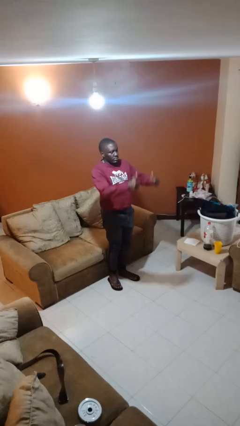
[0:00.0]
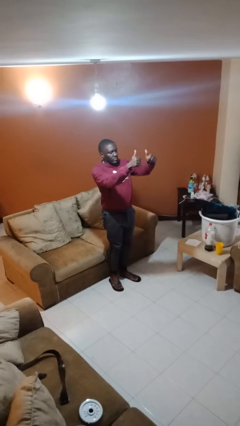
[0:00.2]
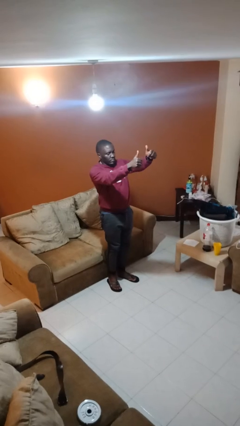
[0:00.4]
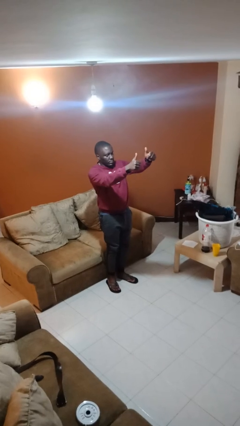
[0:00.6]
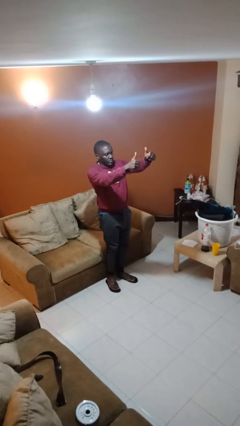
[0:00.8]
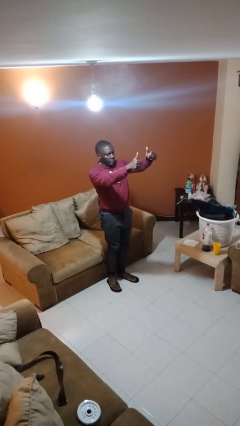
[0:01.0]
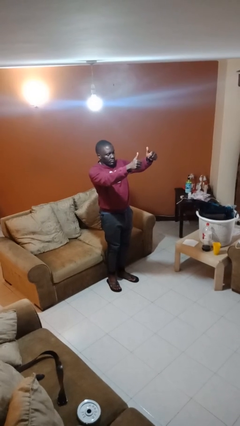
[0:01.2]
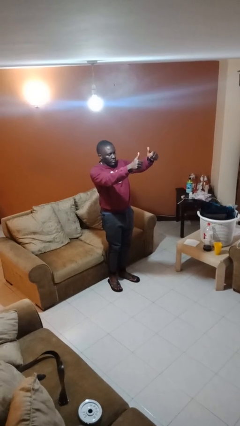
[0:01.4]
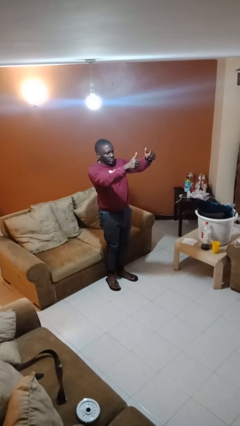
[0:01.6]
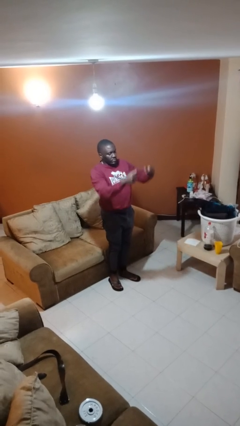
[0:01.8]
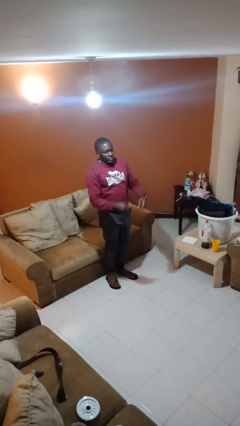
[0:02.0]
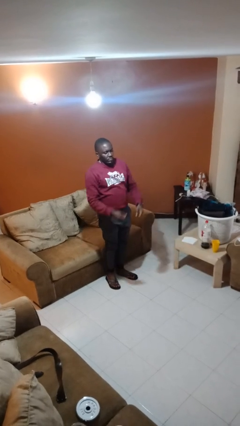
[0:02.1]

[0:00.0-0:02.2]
person gestures thumbs up

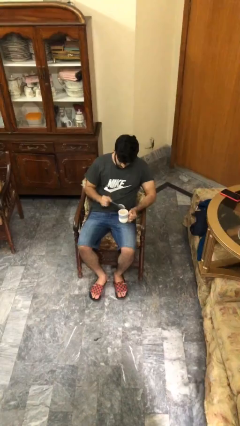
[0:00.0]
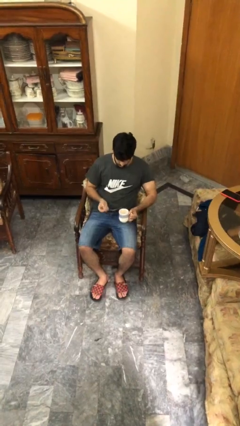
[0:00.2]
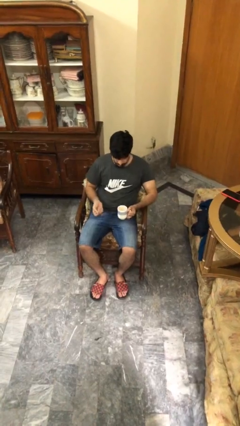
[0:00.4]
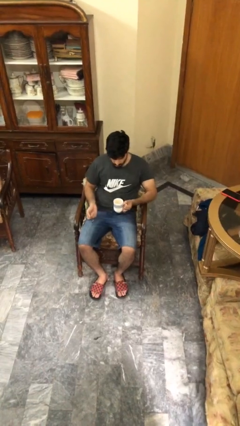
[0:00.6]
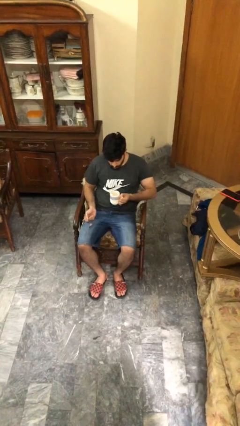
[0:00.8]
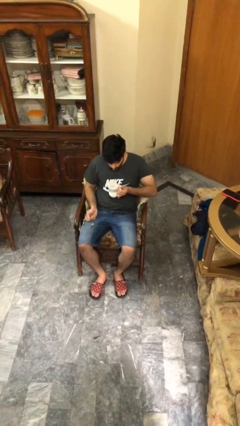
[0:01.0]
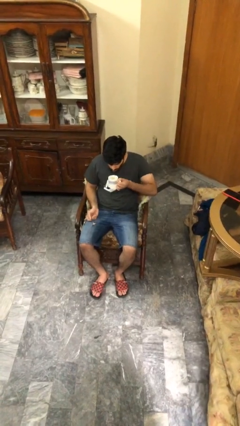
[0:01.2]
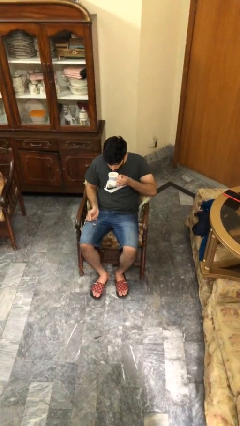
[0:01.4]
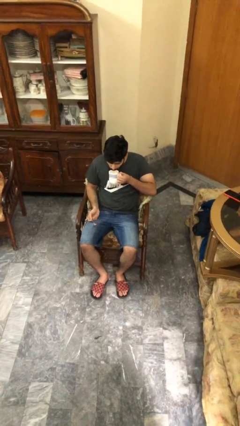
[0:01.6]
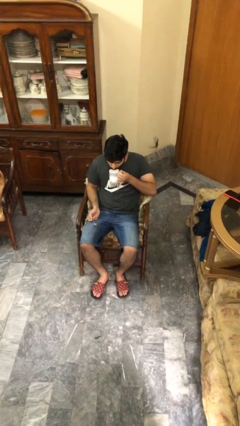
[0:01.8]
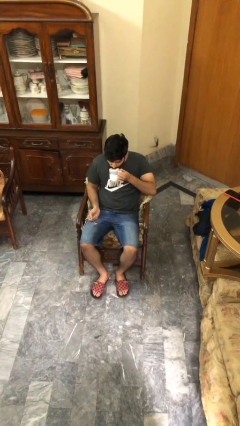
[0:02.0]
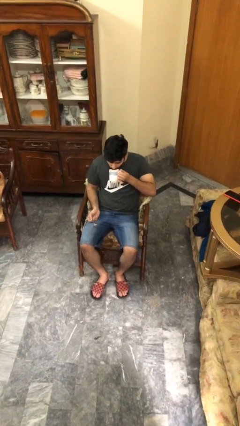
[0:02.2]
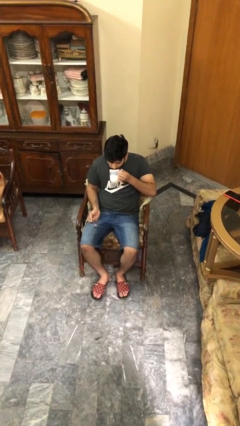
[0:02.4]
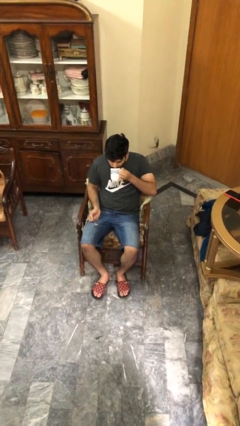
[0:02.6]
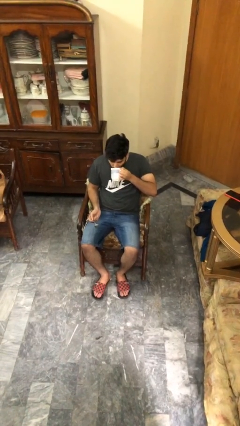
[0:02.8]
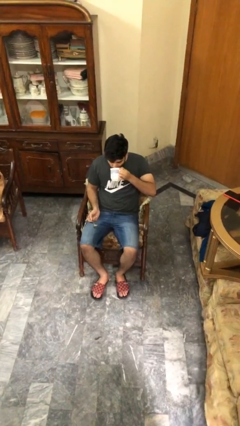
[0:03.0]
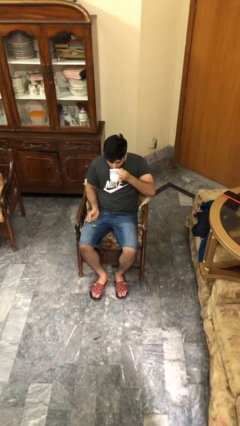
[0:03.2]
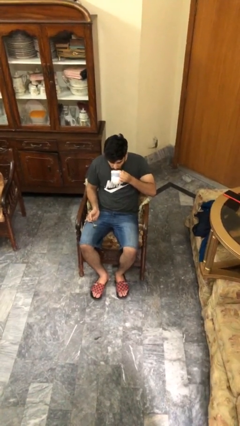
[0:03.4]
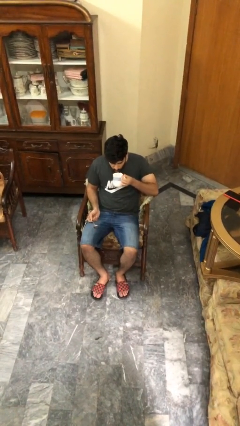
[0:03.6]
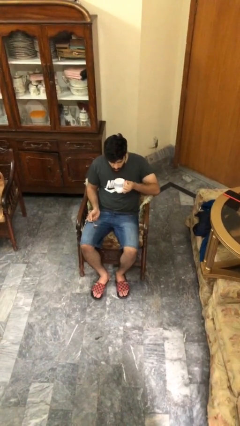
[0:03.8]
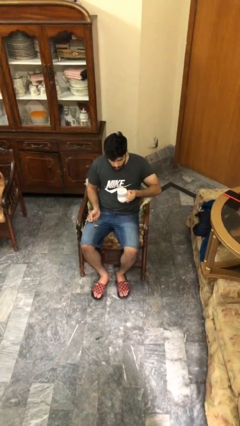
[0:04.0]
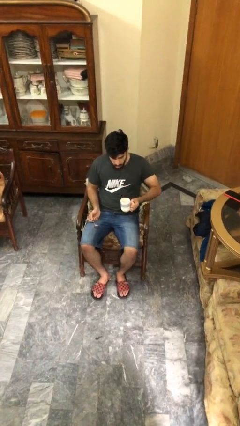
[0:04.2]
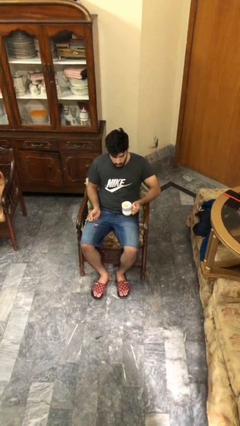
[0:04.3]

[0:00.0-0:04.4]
person drinks from mug

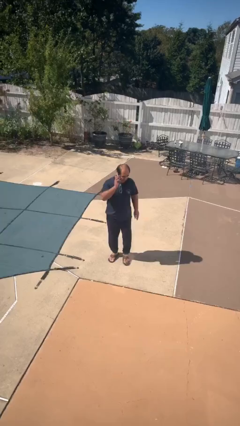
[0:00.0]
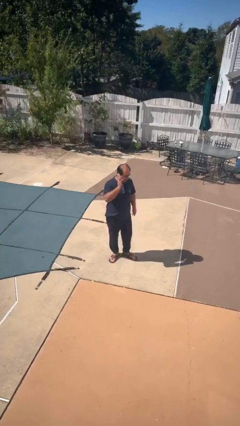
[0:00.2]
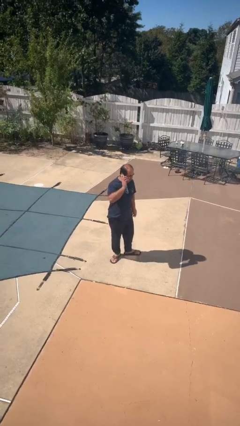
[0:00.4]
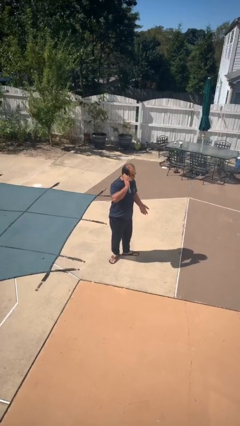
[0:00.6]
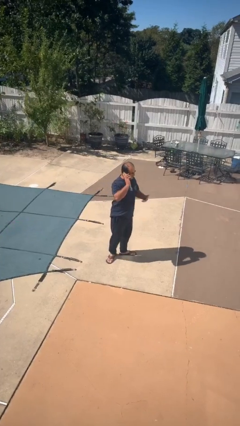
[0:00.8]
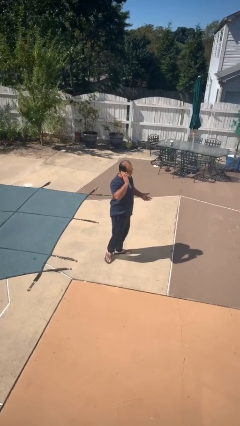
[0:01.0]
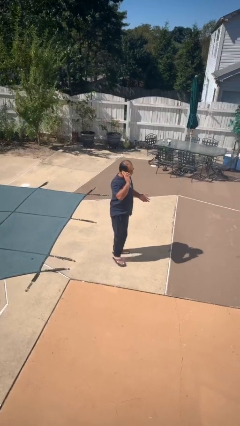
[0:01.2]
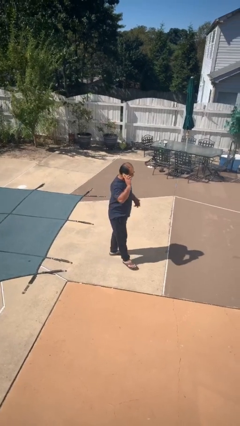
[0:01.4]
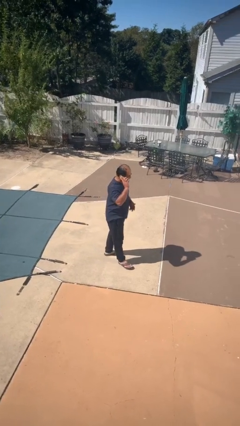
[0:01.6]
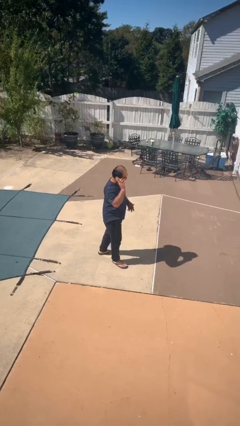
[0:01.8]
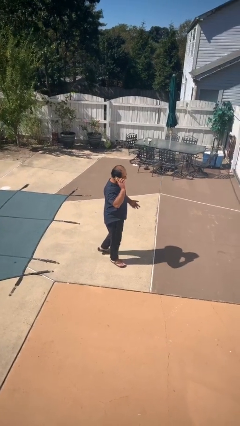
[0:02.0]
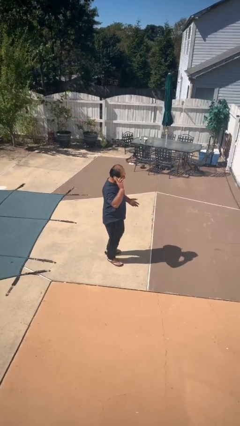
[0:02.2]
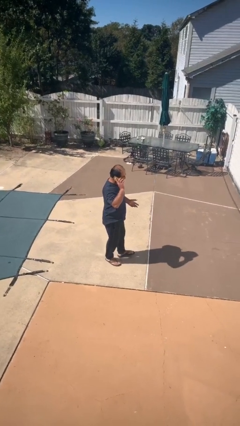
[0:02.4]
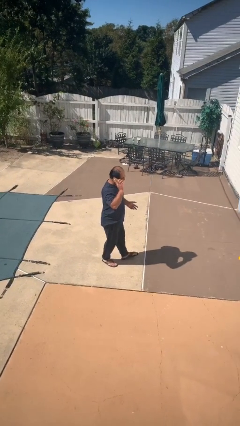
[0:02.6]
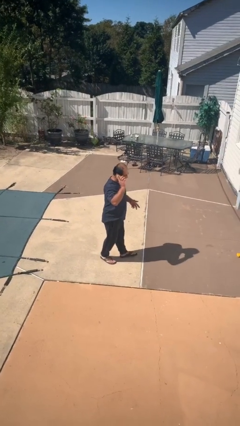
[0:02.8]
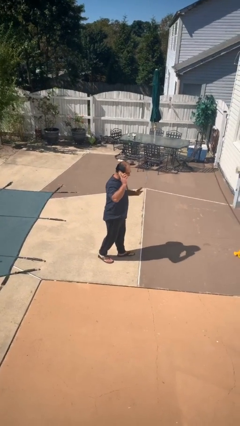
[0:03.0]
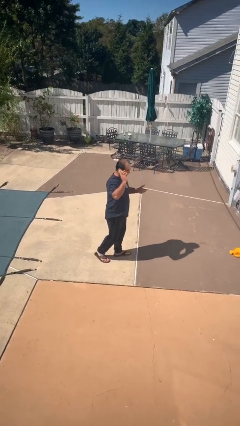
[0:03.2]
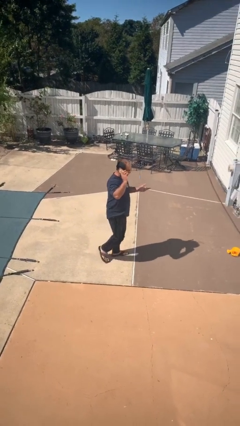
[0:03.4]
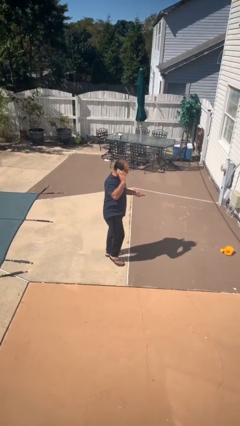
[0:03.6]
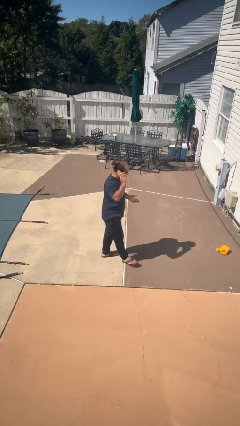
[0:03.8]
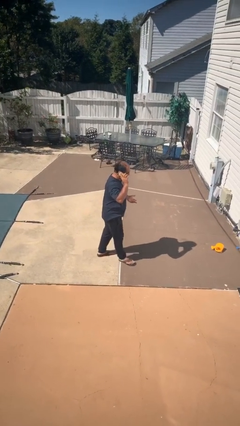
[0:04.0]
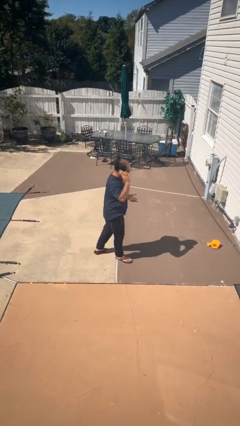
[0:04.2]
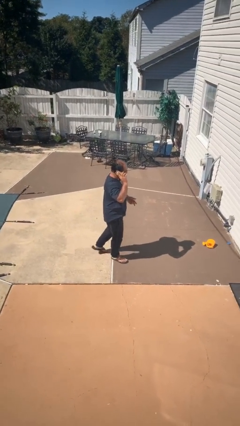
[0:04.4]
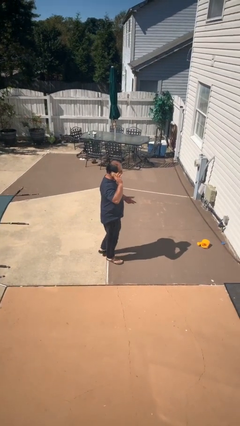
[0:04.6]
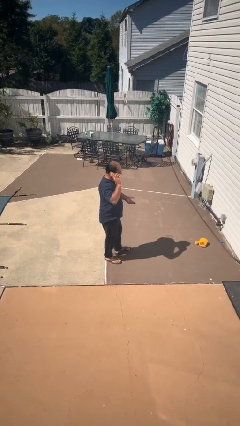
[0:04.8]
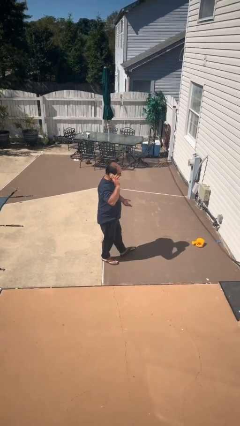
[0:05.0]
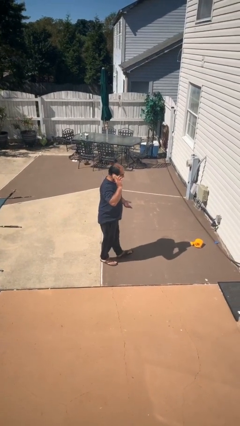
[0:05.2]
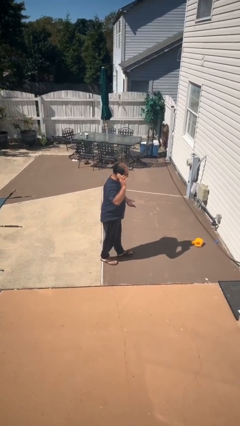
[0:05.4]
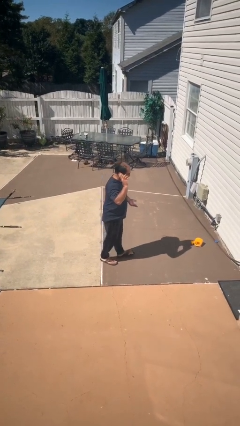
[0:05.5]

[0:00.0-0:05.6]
person talks on phone

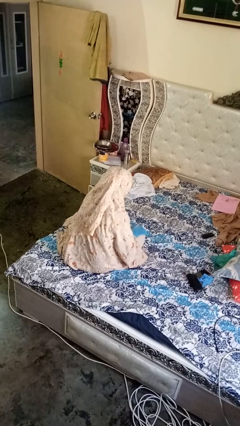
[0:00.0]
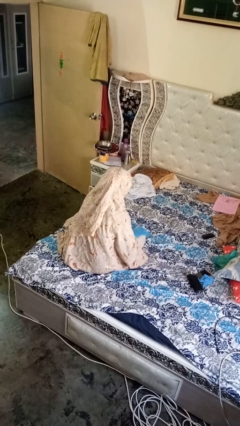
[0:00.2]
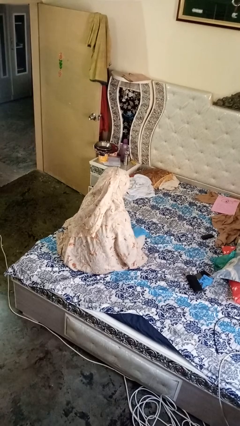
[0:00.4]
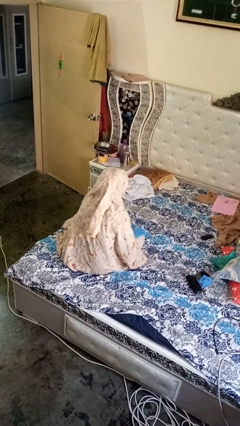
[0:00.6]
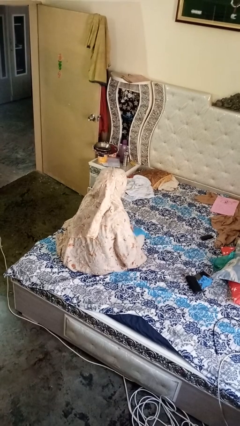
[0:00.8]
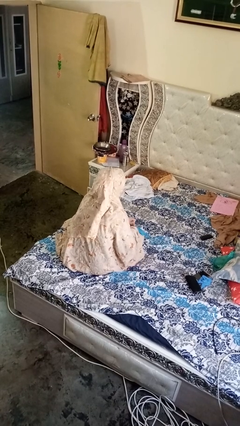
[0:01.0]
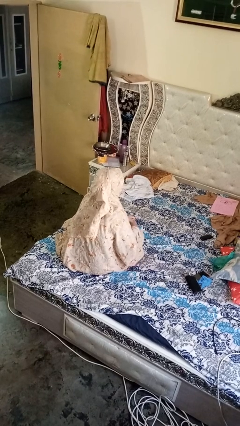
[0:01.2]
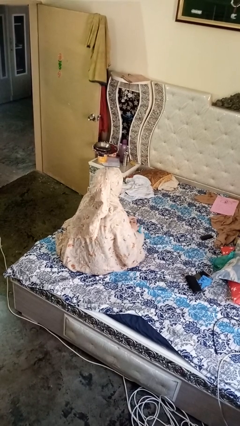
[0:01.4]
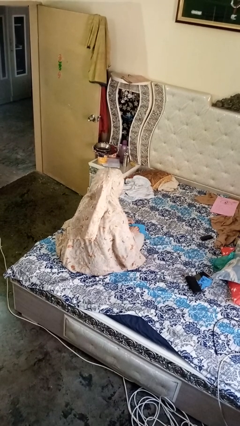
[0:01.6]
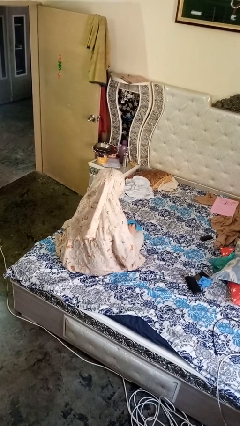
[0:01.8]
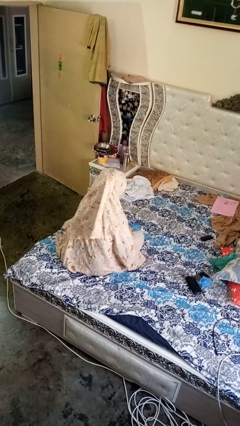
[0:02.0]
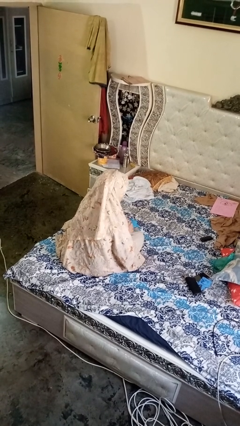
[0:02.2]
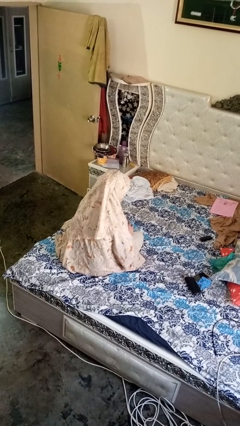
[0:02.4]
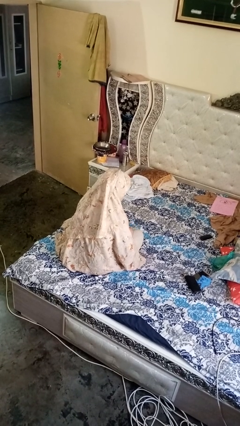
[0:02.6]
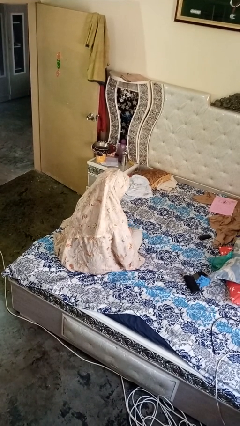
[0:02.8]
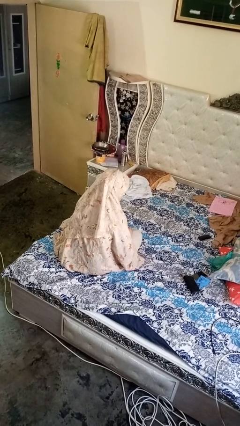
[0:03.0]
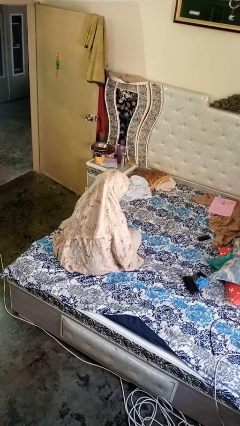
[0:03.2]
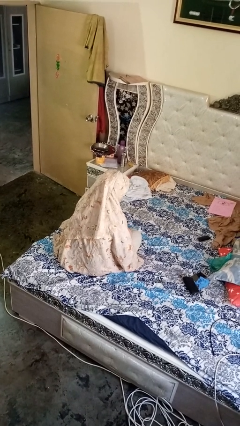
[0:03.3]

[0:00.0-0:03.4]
person takes off gloves

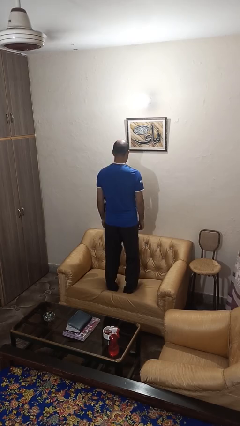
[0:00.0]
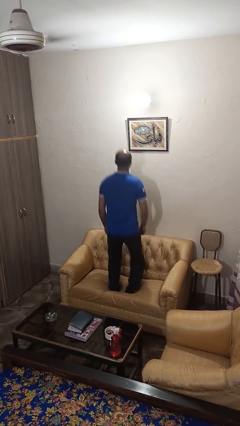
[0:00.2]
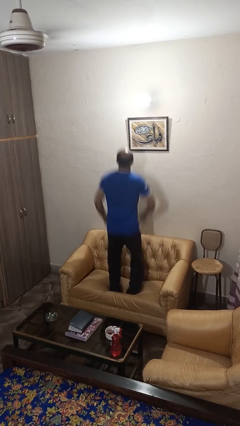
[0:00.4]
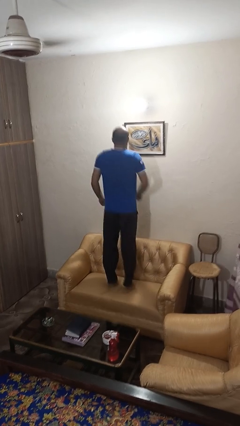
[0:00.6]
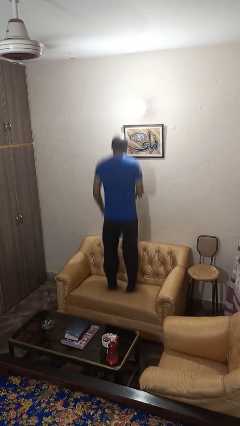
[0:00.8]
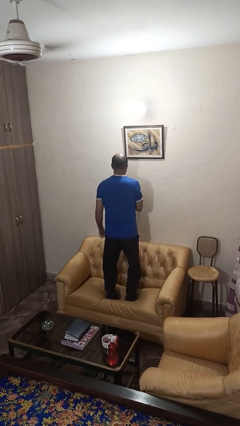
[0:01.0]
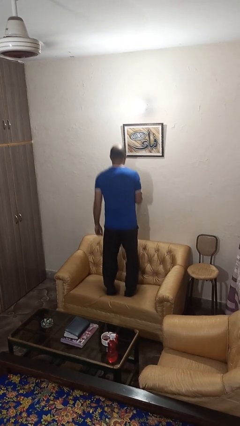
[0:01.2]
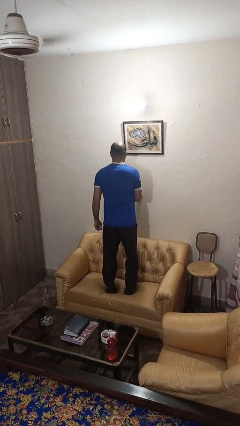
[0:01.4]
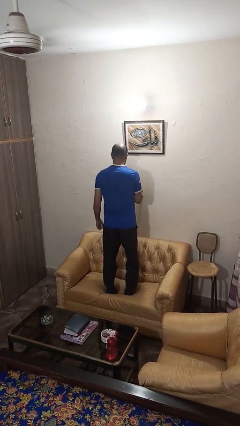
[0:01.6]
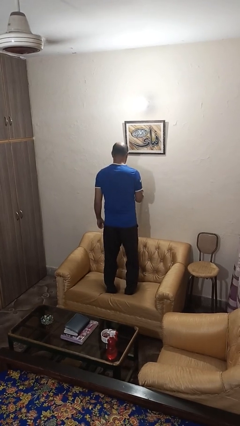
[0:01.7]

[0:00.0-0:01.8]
person jumps on couch
